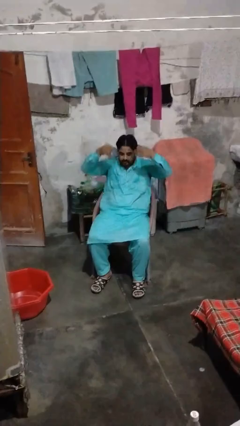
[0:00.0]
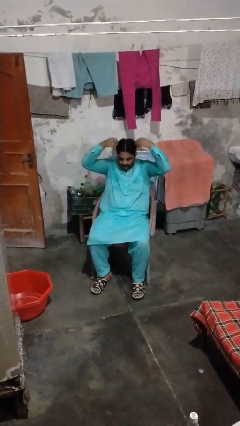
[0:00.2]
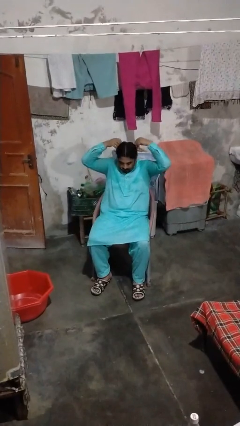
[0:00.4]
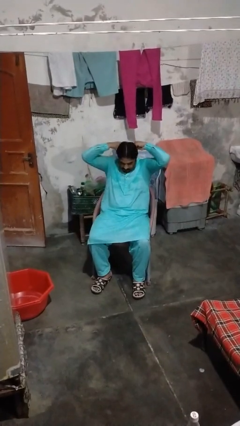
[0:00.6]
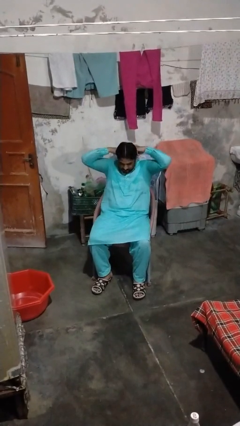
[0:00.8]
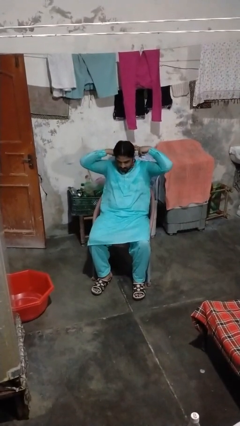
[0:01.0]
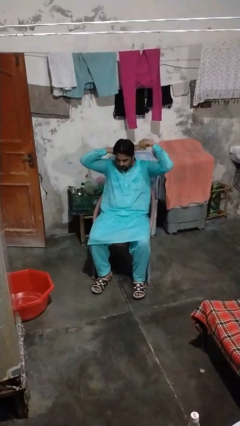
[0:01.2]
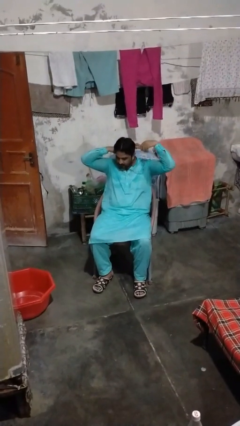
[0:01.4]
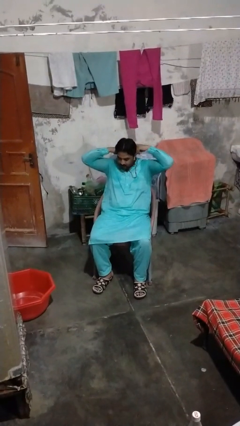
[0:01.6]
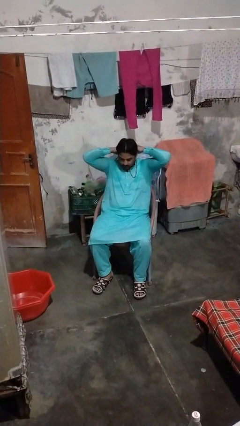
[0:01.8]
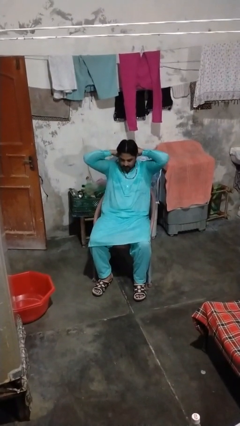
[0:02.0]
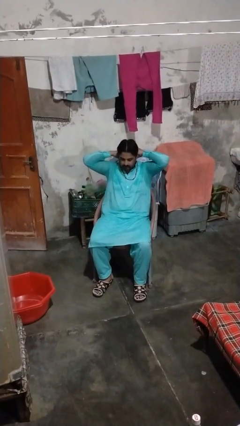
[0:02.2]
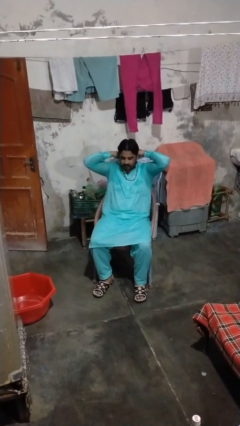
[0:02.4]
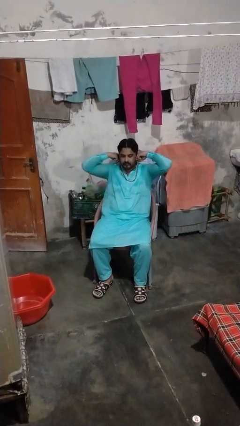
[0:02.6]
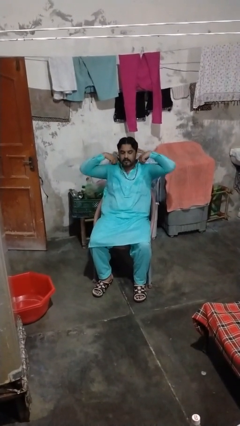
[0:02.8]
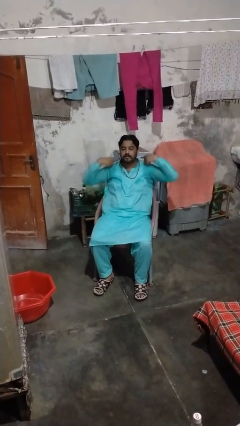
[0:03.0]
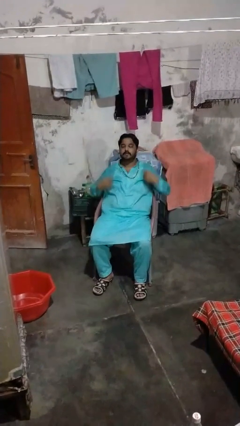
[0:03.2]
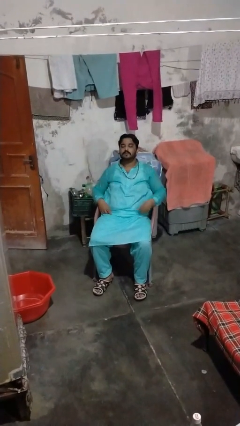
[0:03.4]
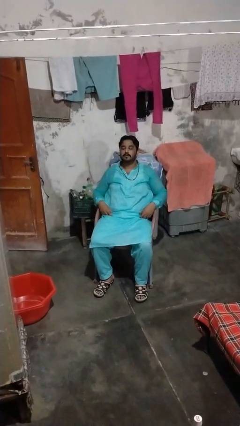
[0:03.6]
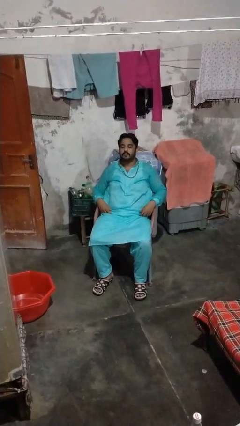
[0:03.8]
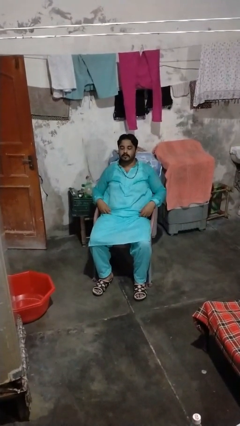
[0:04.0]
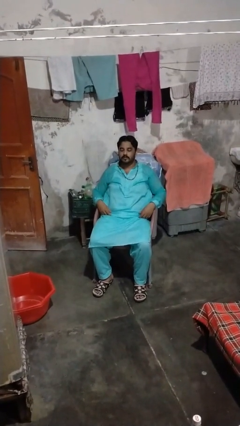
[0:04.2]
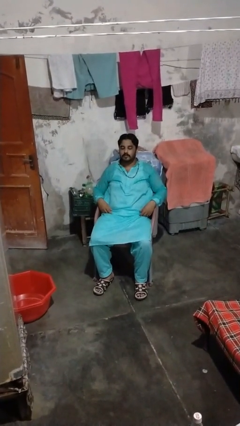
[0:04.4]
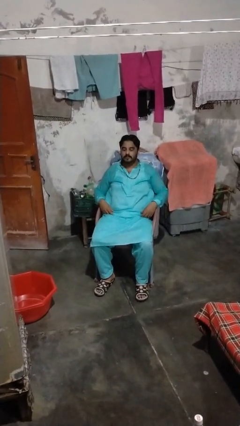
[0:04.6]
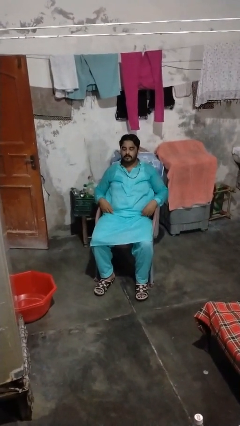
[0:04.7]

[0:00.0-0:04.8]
person puts on necklace

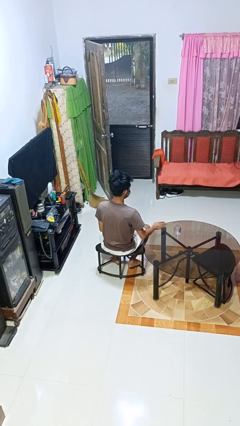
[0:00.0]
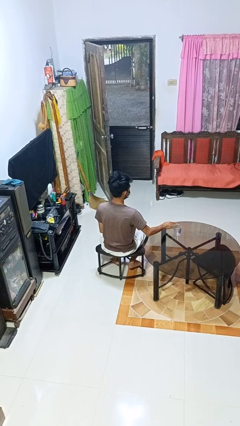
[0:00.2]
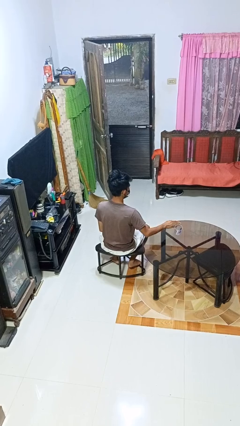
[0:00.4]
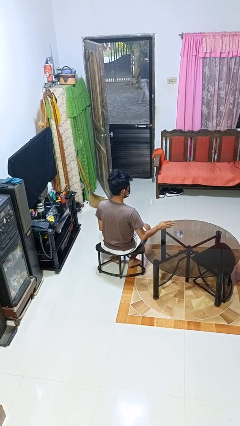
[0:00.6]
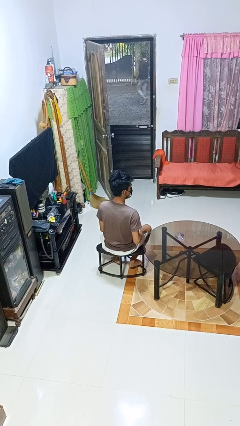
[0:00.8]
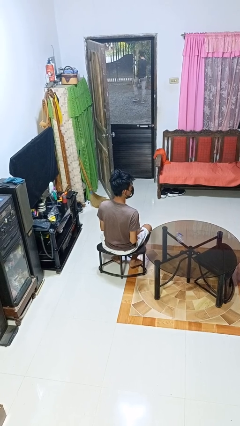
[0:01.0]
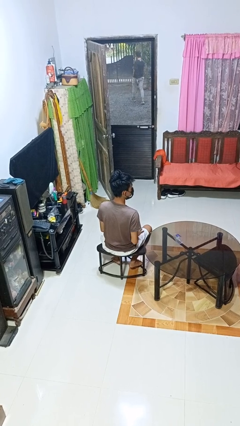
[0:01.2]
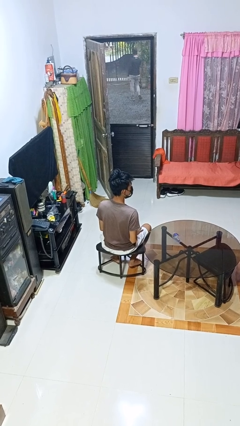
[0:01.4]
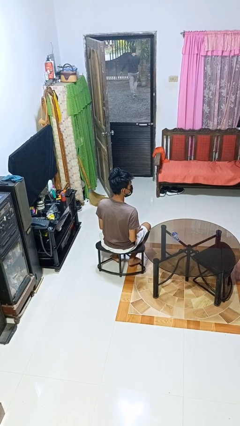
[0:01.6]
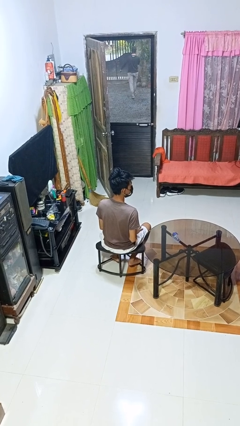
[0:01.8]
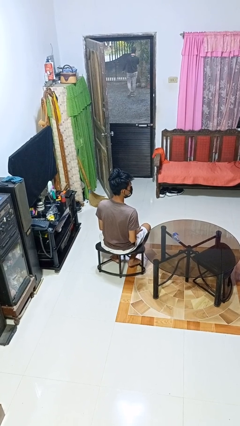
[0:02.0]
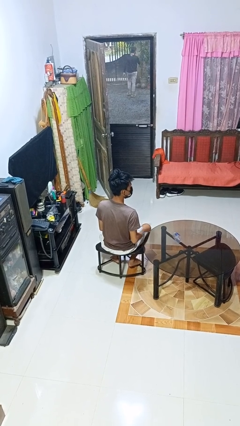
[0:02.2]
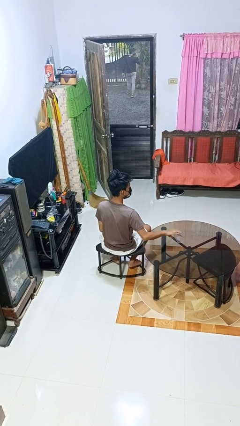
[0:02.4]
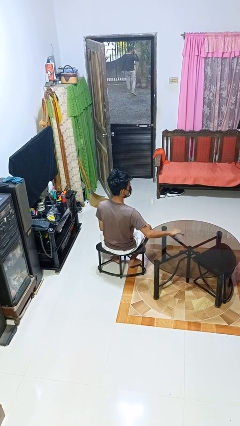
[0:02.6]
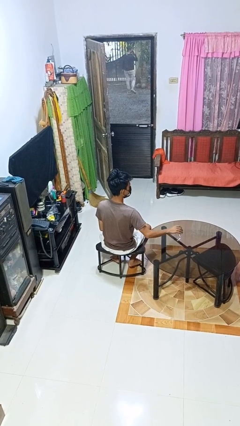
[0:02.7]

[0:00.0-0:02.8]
person knocks over glass

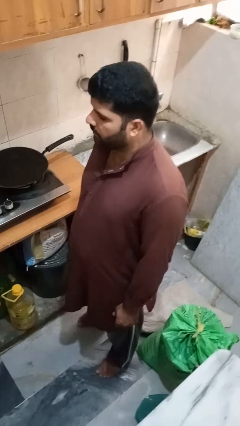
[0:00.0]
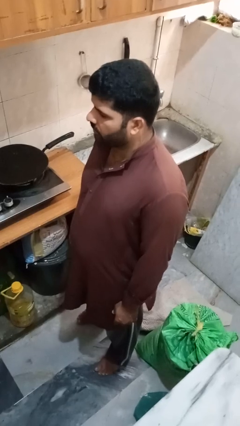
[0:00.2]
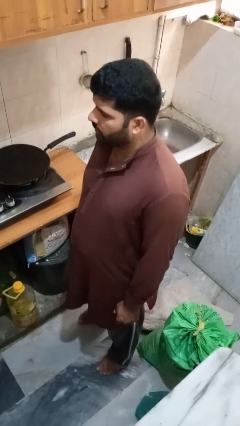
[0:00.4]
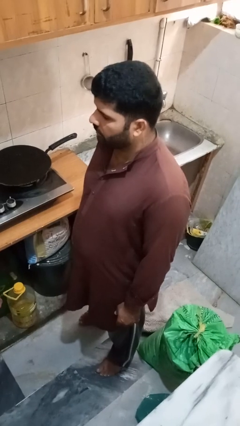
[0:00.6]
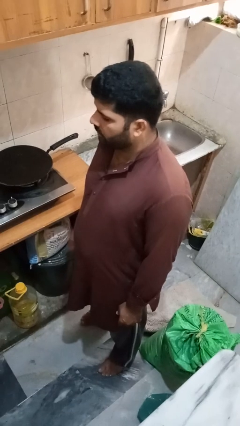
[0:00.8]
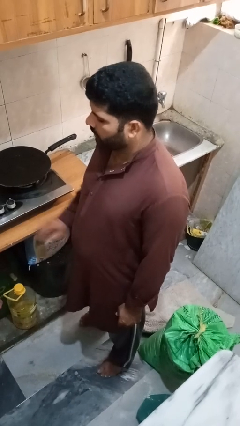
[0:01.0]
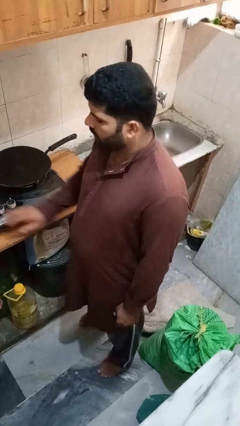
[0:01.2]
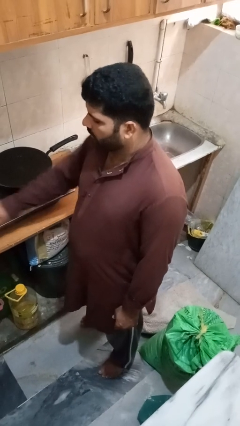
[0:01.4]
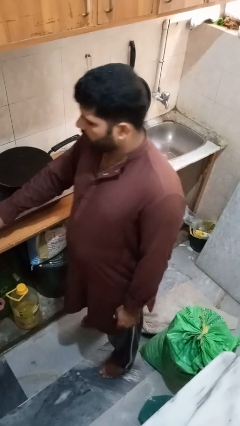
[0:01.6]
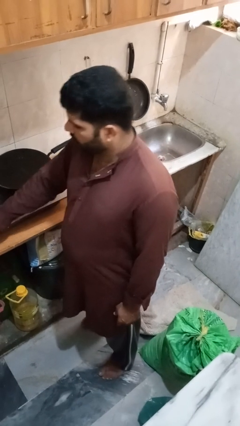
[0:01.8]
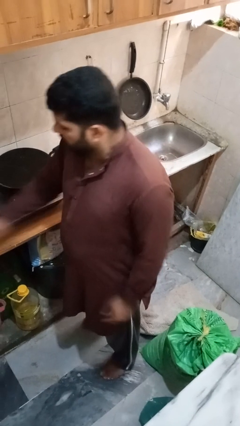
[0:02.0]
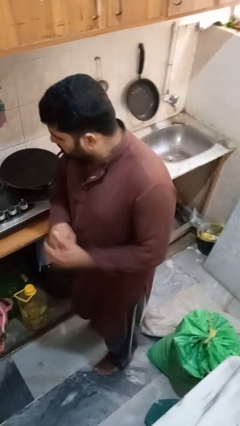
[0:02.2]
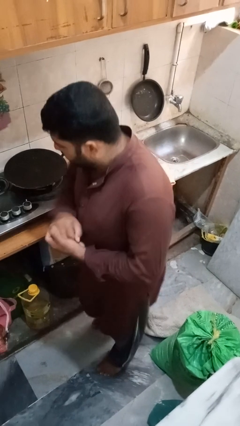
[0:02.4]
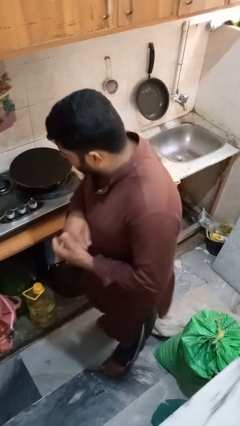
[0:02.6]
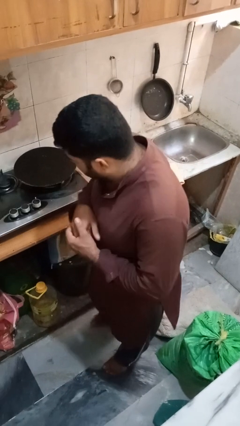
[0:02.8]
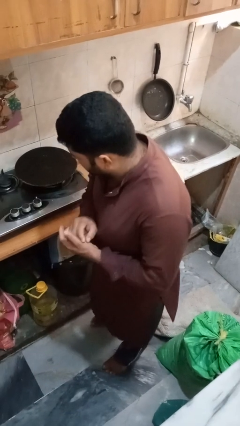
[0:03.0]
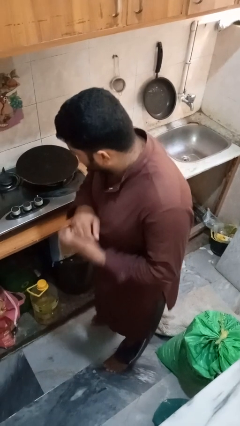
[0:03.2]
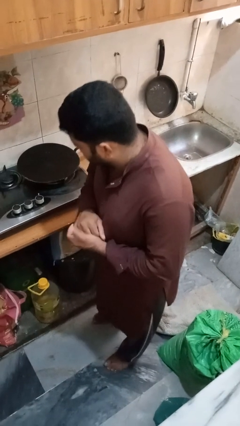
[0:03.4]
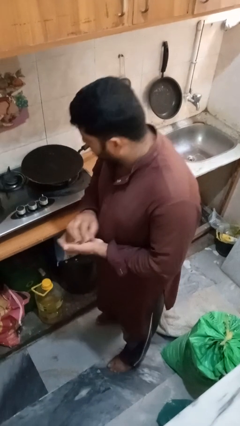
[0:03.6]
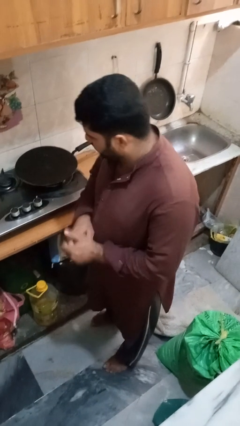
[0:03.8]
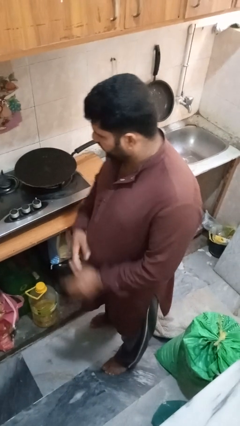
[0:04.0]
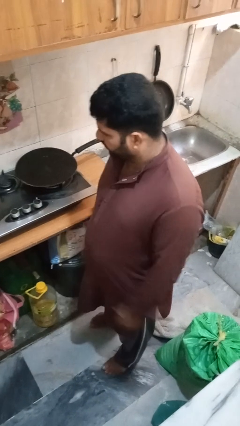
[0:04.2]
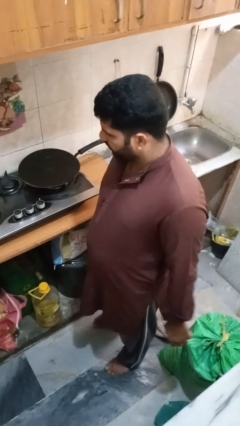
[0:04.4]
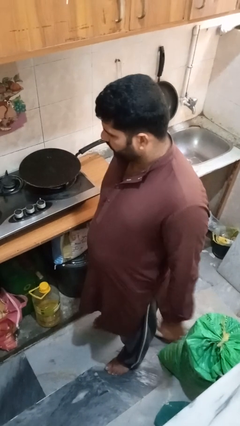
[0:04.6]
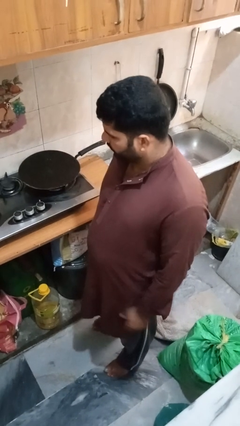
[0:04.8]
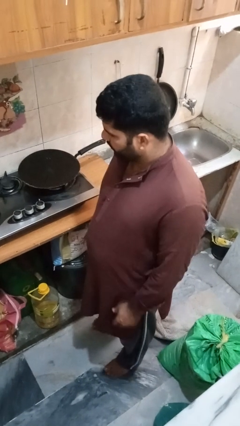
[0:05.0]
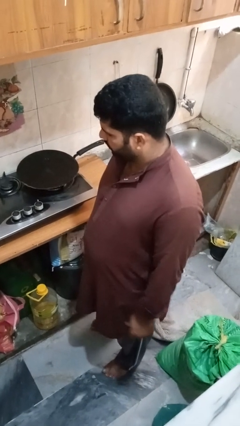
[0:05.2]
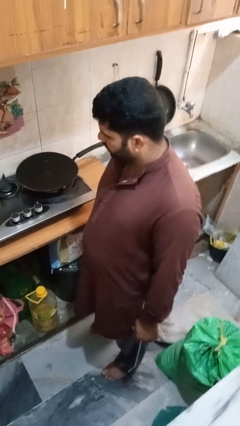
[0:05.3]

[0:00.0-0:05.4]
person burns hand

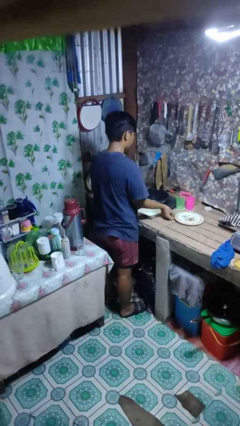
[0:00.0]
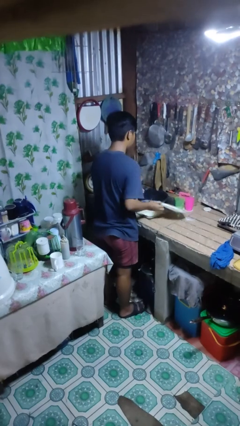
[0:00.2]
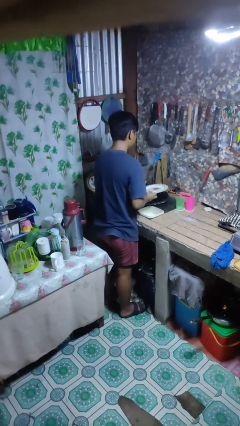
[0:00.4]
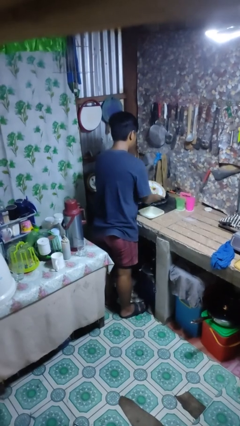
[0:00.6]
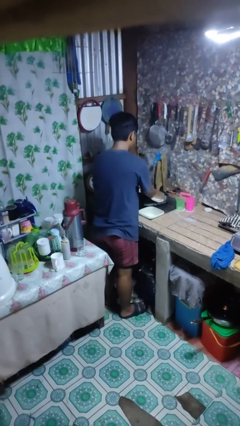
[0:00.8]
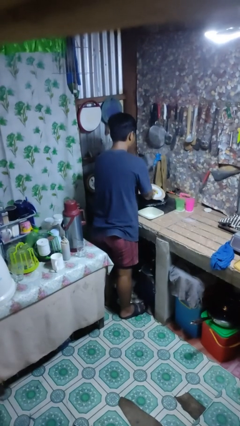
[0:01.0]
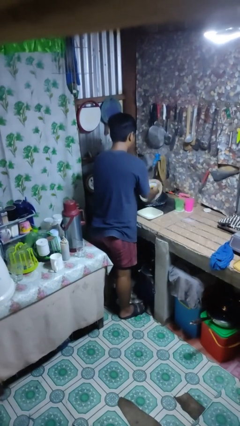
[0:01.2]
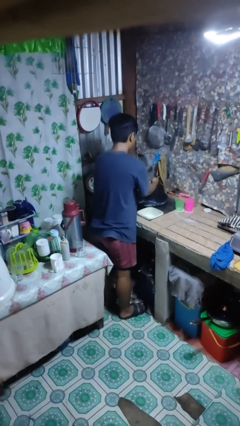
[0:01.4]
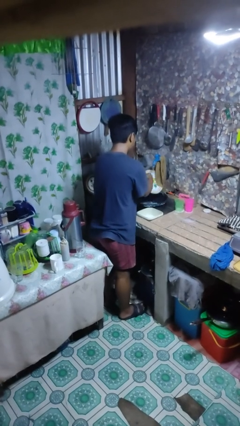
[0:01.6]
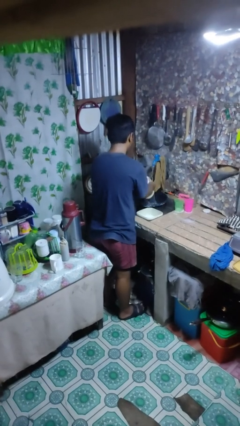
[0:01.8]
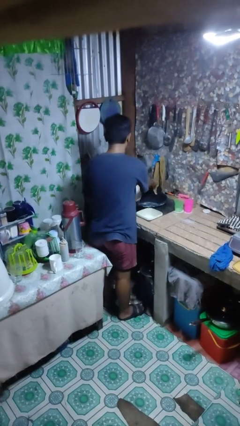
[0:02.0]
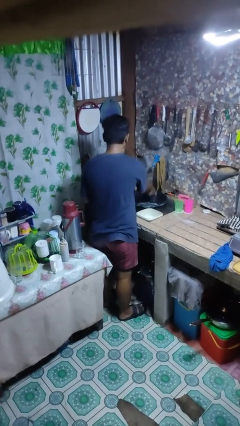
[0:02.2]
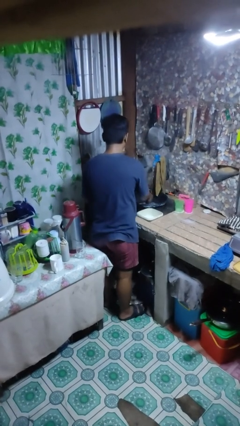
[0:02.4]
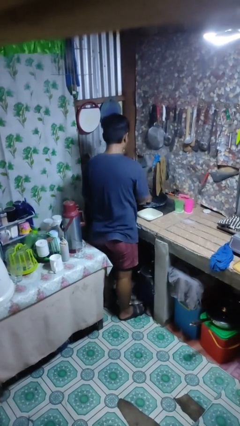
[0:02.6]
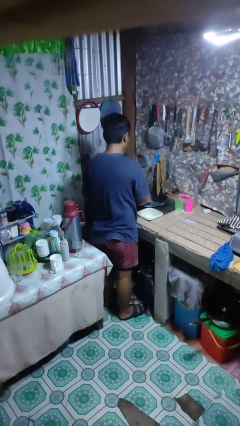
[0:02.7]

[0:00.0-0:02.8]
person washes dish

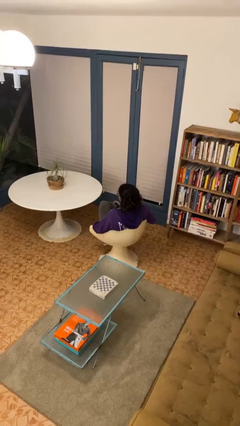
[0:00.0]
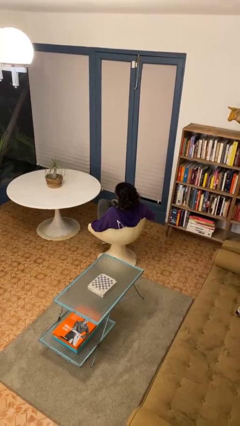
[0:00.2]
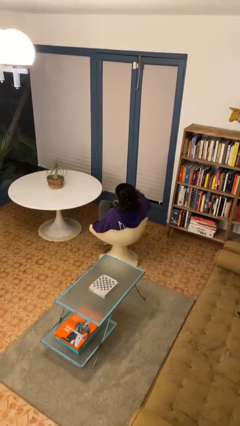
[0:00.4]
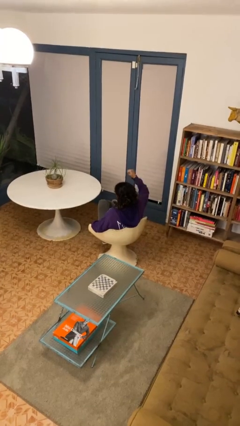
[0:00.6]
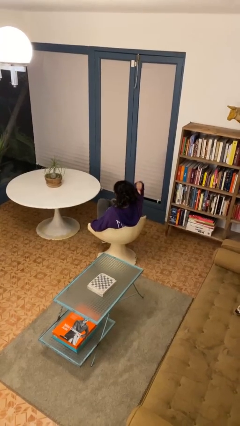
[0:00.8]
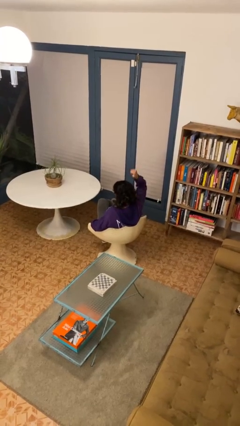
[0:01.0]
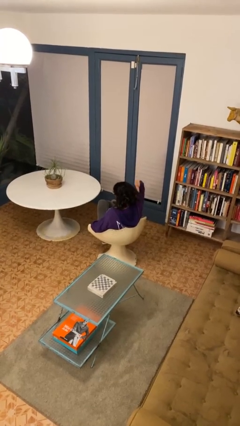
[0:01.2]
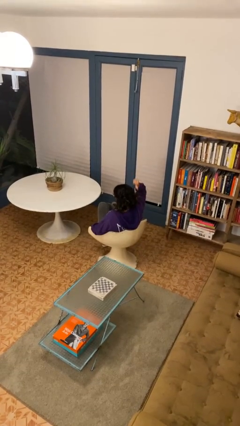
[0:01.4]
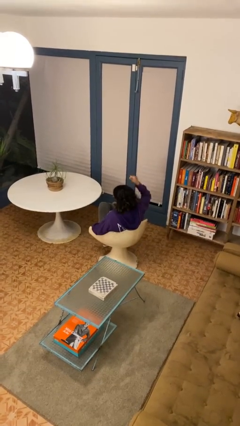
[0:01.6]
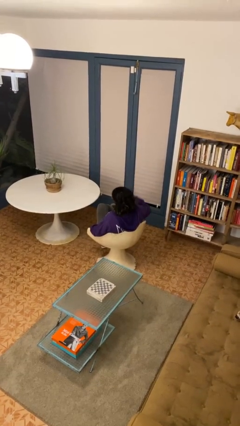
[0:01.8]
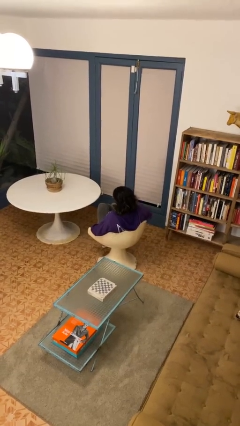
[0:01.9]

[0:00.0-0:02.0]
person gestures behind me
